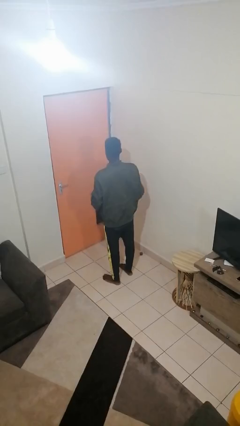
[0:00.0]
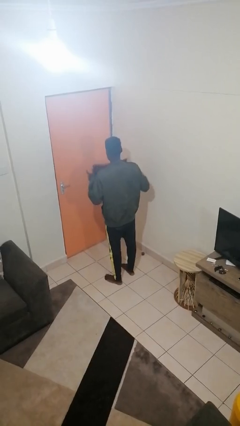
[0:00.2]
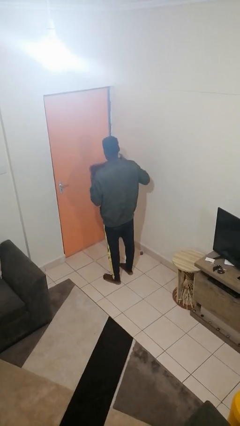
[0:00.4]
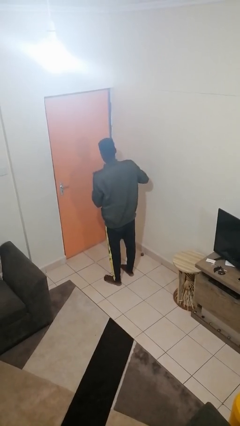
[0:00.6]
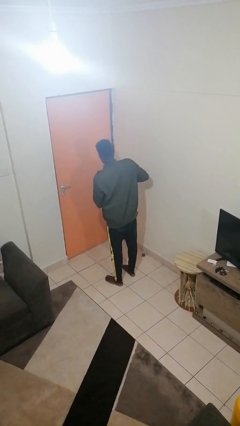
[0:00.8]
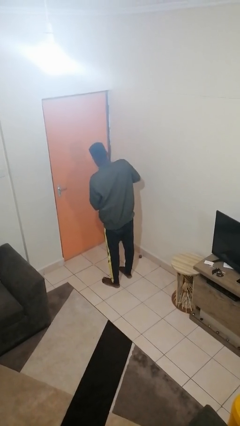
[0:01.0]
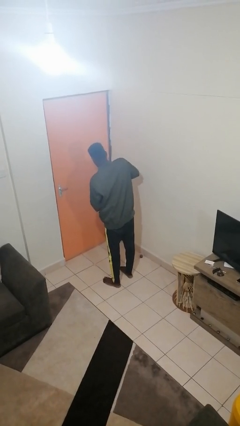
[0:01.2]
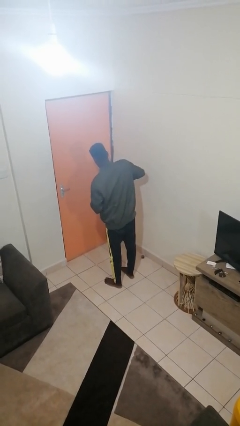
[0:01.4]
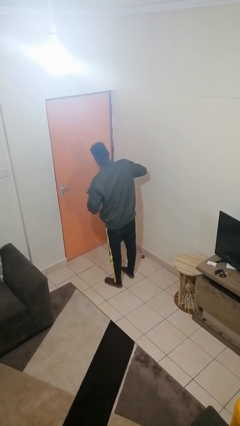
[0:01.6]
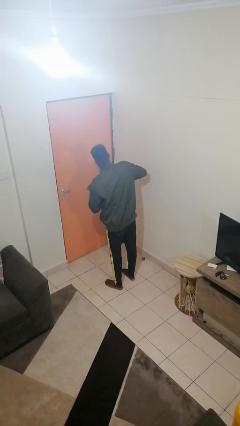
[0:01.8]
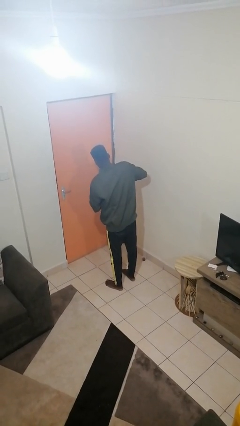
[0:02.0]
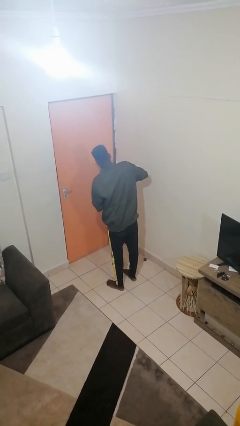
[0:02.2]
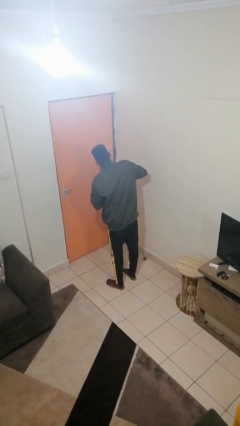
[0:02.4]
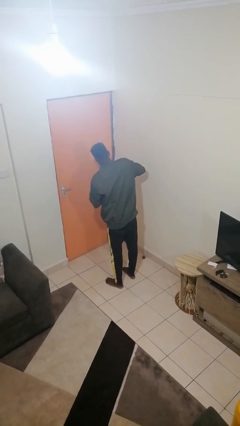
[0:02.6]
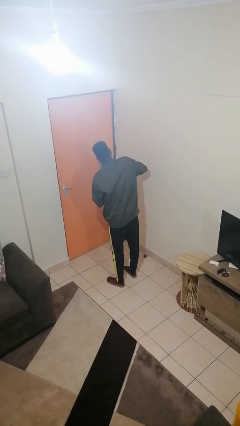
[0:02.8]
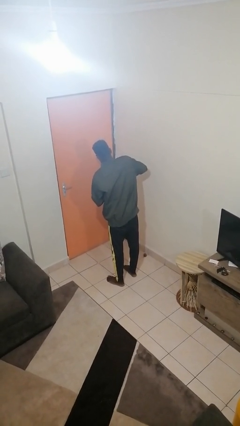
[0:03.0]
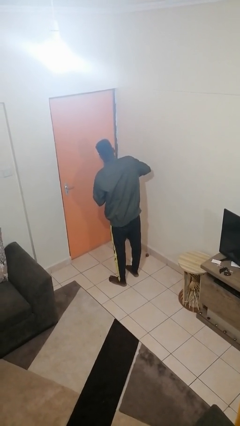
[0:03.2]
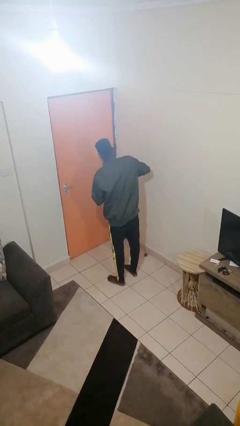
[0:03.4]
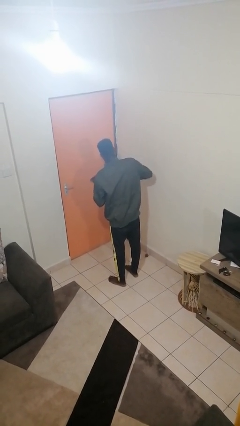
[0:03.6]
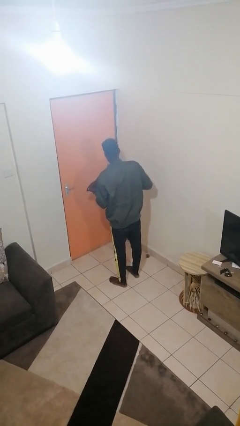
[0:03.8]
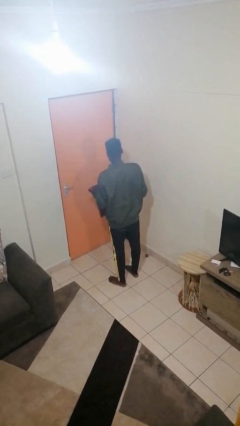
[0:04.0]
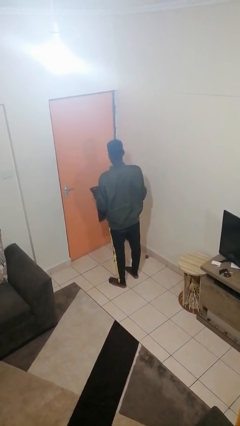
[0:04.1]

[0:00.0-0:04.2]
person squeezes object

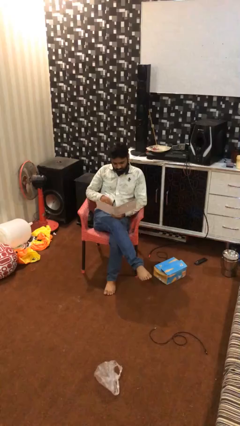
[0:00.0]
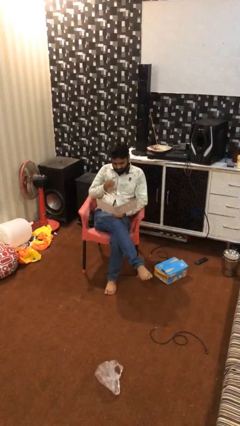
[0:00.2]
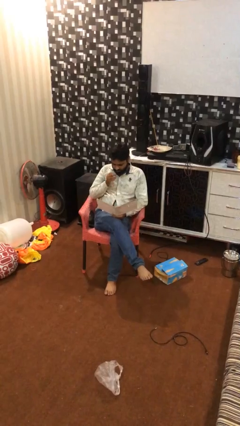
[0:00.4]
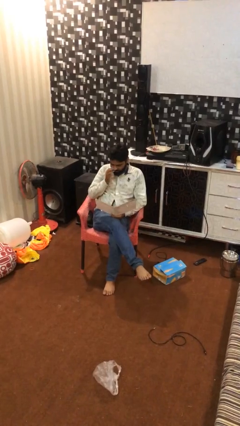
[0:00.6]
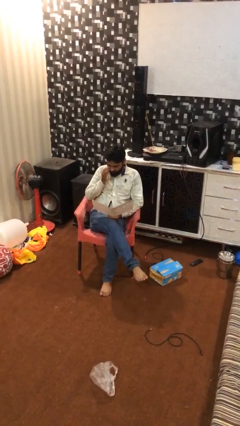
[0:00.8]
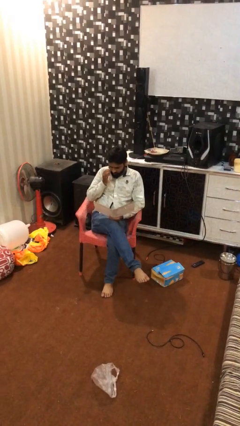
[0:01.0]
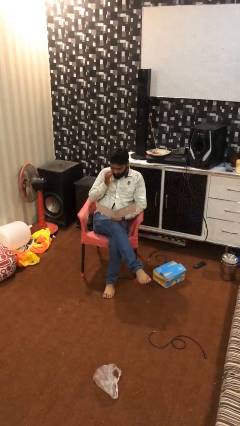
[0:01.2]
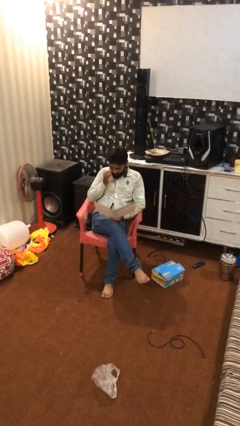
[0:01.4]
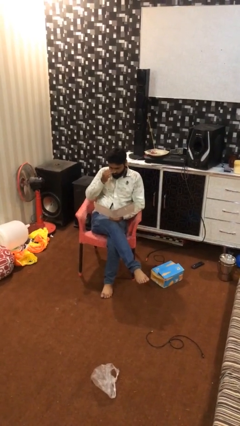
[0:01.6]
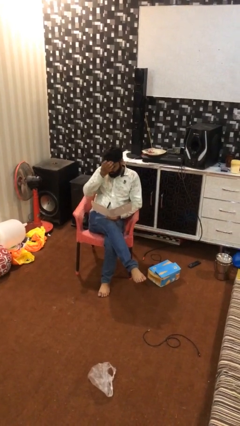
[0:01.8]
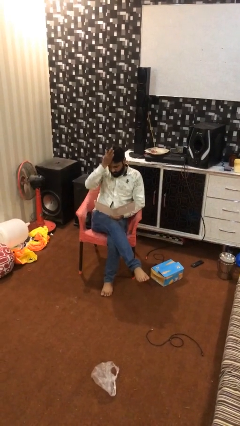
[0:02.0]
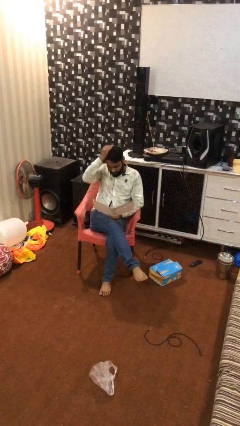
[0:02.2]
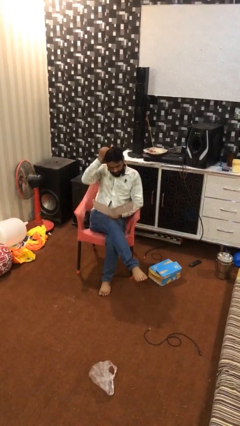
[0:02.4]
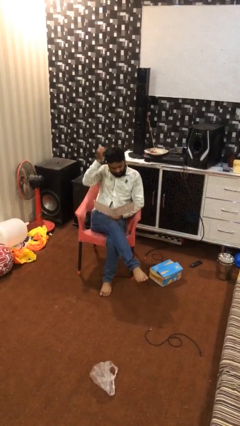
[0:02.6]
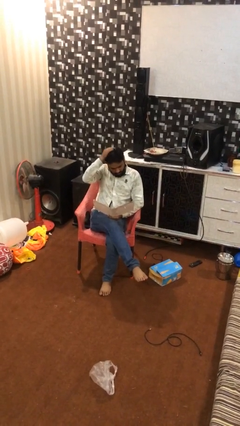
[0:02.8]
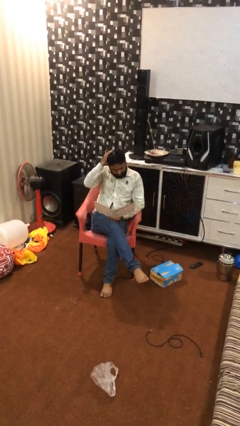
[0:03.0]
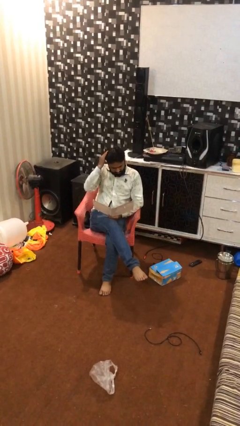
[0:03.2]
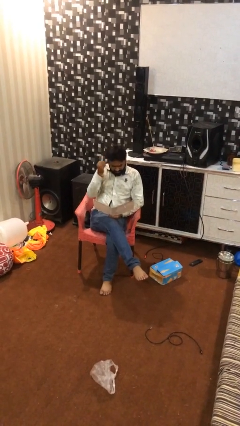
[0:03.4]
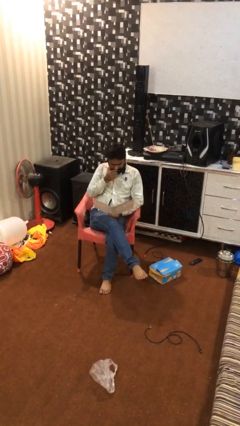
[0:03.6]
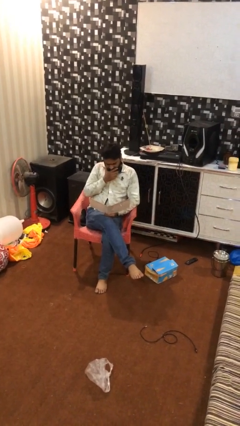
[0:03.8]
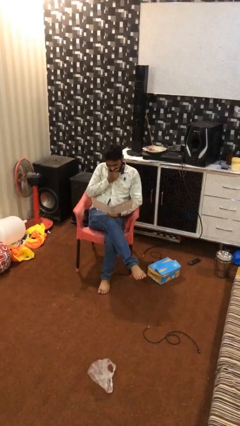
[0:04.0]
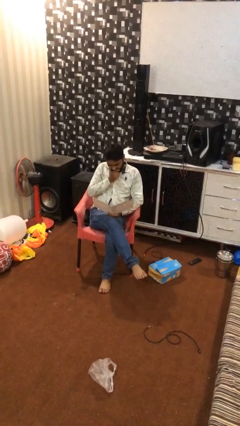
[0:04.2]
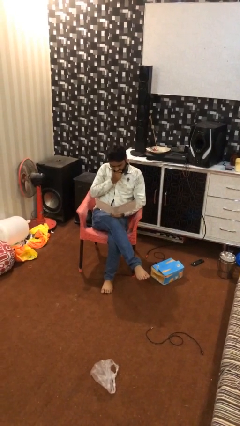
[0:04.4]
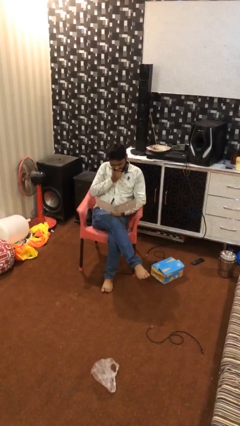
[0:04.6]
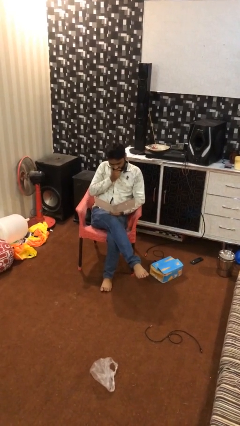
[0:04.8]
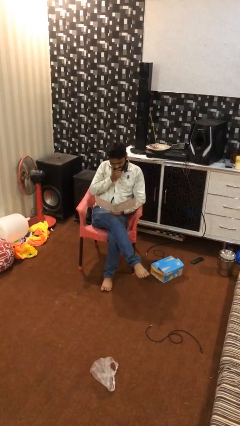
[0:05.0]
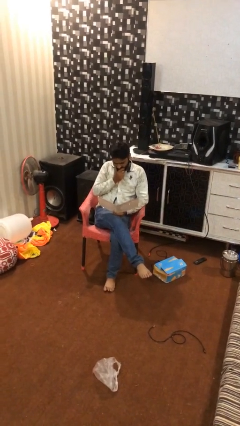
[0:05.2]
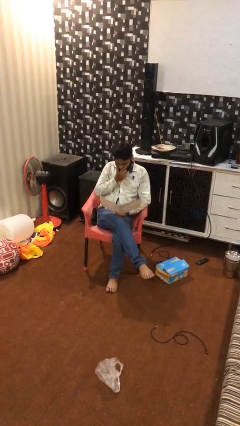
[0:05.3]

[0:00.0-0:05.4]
person reads document

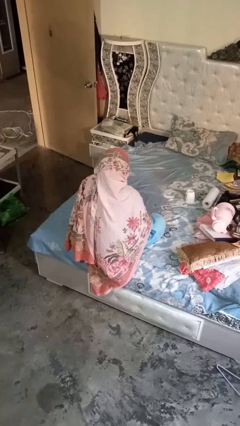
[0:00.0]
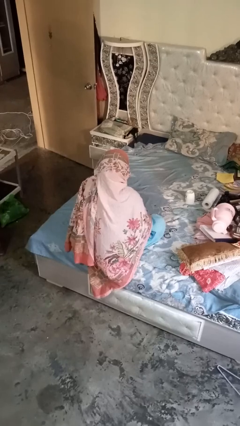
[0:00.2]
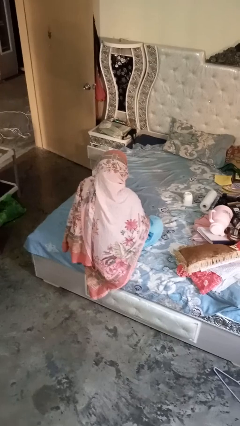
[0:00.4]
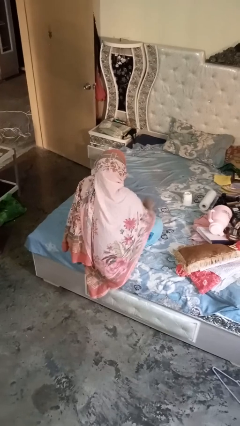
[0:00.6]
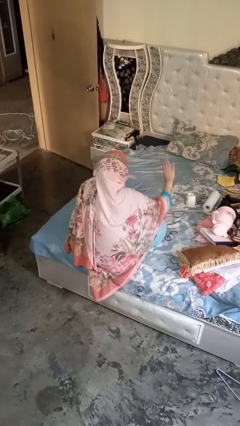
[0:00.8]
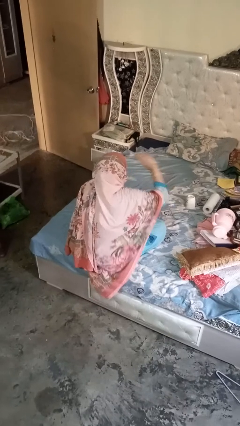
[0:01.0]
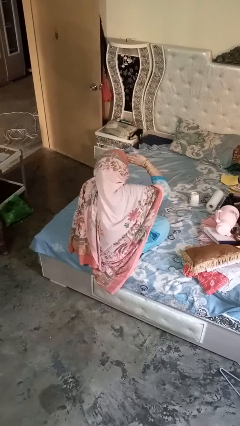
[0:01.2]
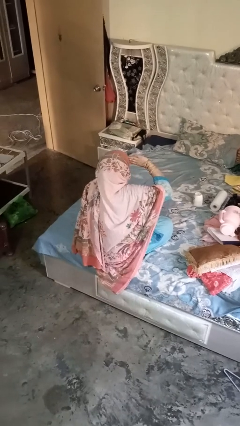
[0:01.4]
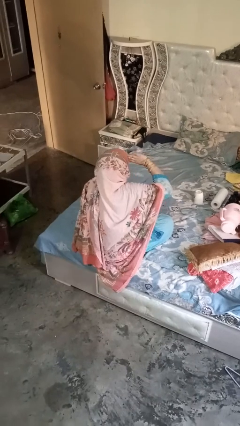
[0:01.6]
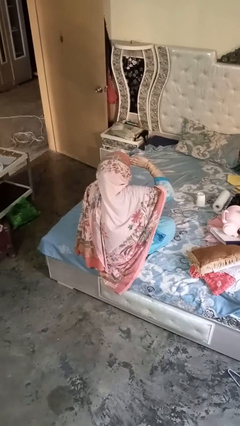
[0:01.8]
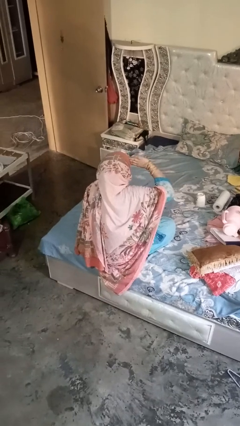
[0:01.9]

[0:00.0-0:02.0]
person salutes

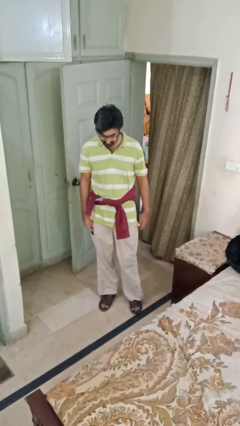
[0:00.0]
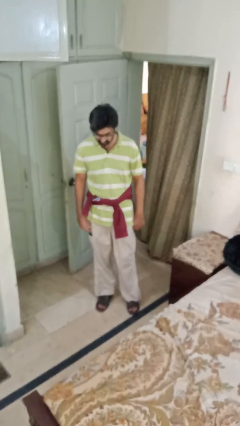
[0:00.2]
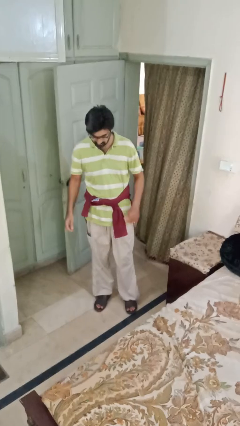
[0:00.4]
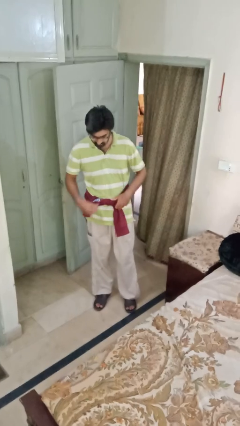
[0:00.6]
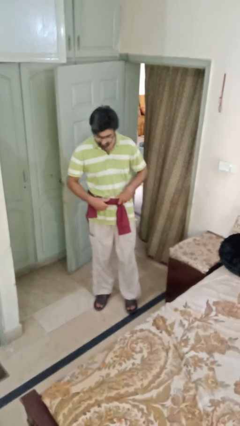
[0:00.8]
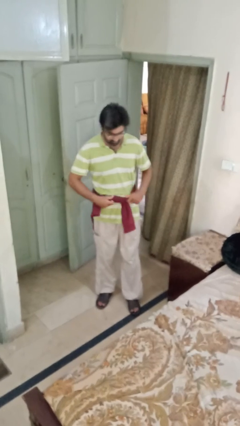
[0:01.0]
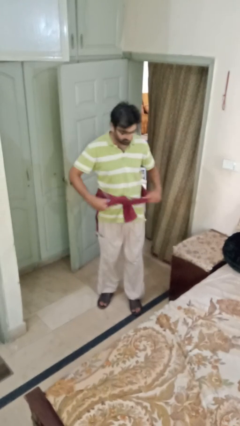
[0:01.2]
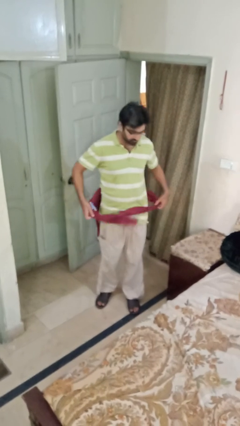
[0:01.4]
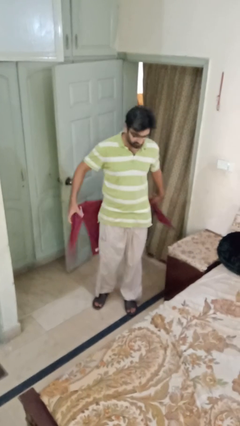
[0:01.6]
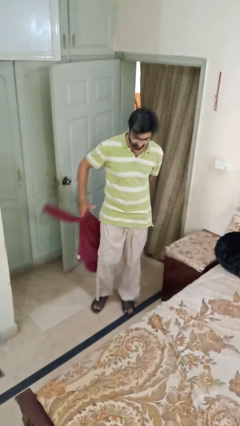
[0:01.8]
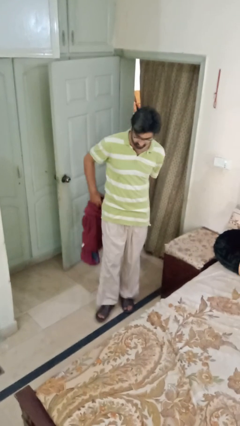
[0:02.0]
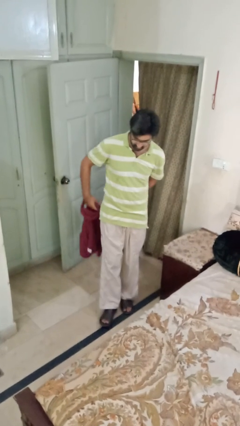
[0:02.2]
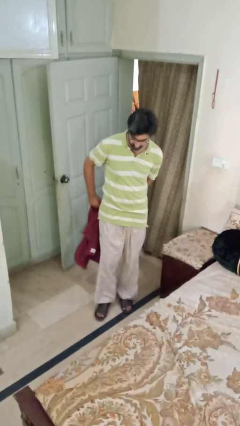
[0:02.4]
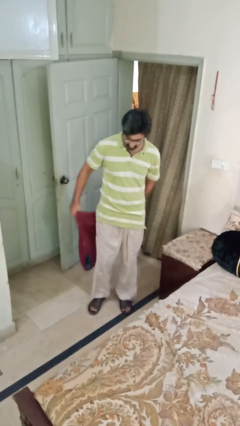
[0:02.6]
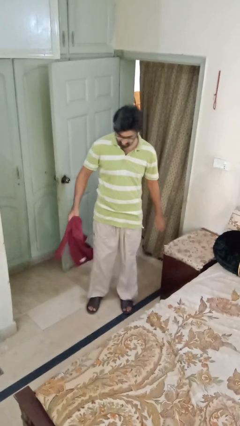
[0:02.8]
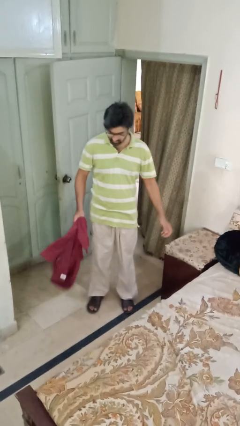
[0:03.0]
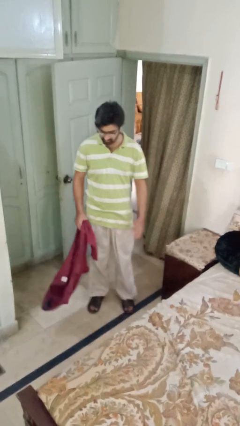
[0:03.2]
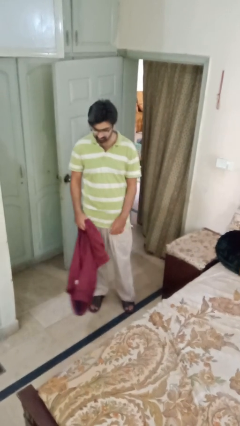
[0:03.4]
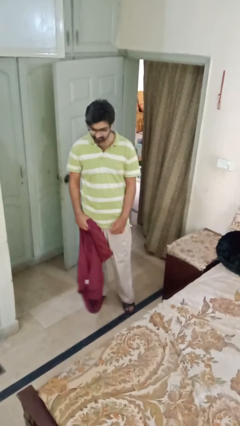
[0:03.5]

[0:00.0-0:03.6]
person unties jacket around waist

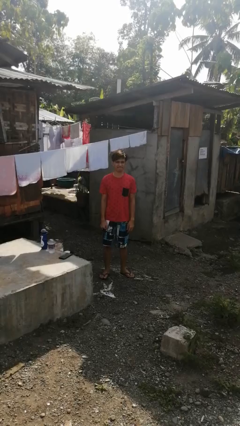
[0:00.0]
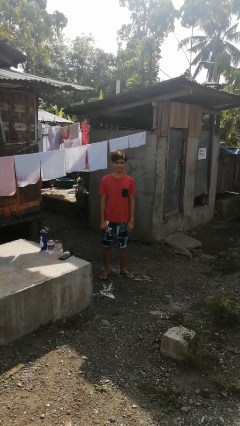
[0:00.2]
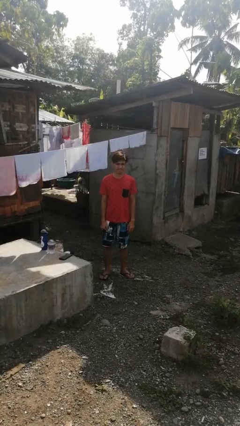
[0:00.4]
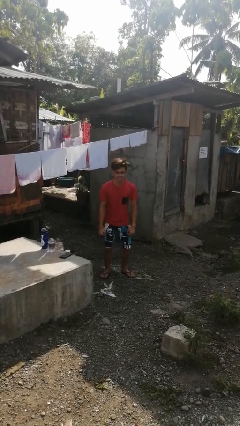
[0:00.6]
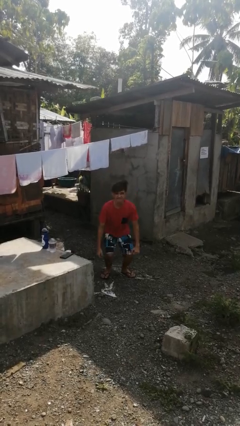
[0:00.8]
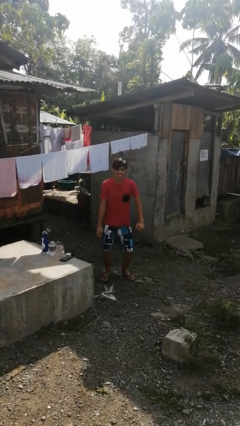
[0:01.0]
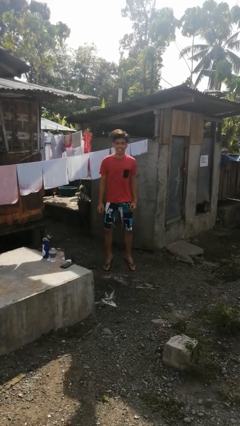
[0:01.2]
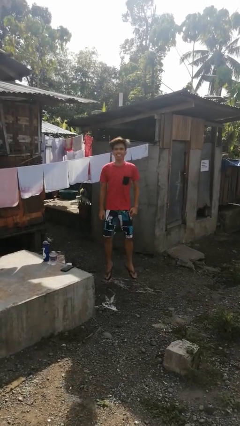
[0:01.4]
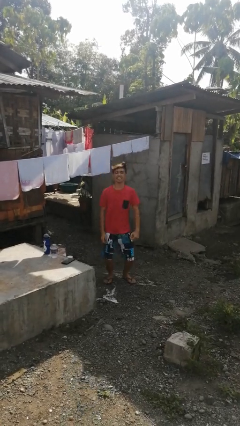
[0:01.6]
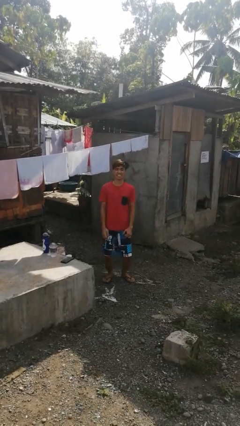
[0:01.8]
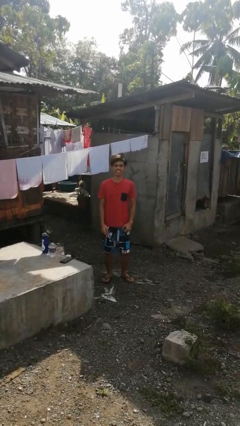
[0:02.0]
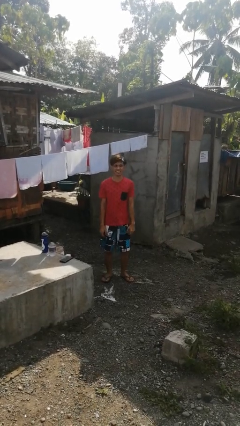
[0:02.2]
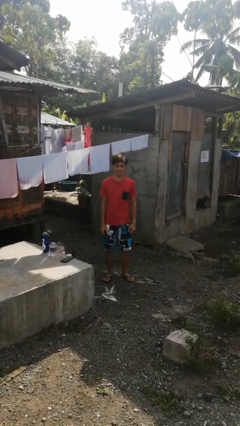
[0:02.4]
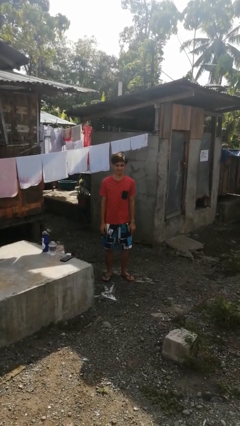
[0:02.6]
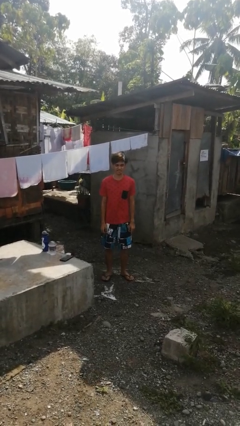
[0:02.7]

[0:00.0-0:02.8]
person jumps
